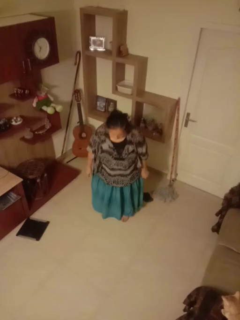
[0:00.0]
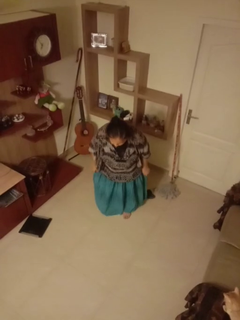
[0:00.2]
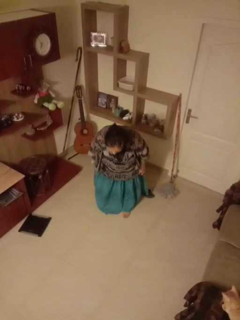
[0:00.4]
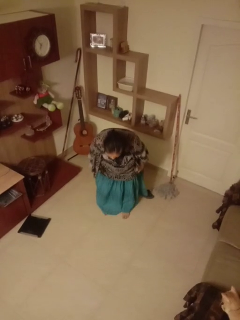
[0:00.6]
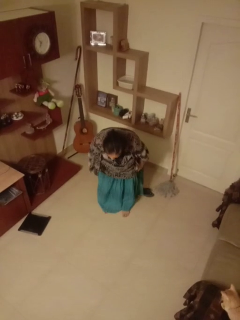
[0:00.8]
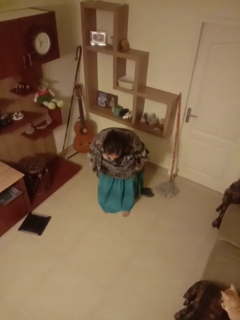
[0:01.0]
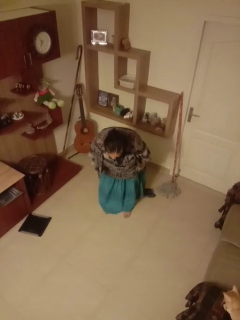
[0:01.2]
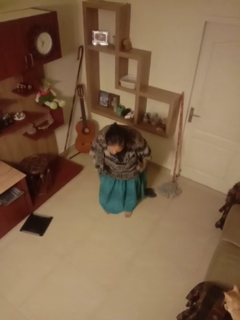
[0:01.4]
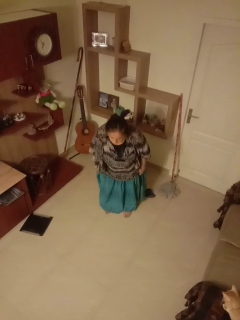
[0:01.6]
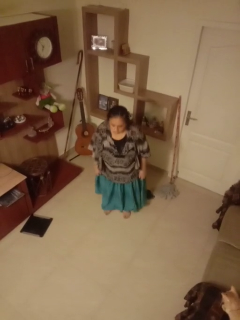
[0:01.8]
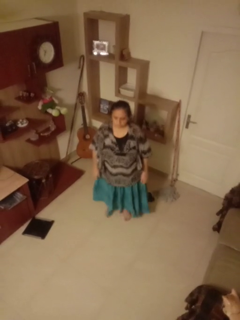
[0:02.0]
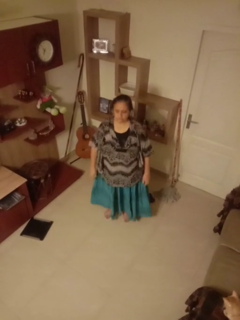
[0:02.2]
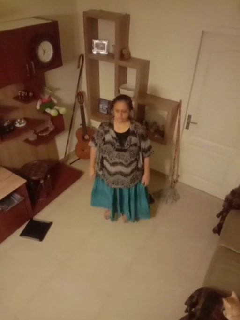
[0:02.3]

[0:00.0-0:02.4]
person bows

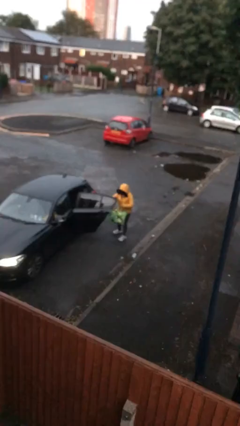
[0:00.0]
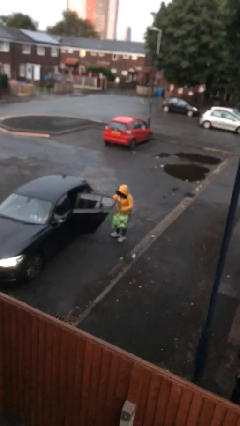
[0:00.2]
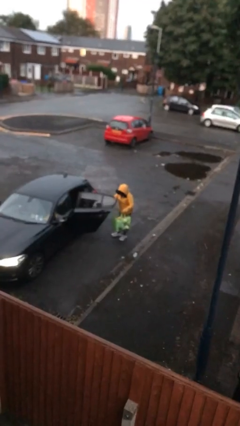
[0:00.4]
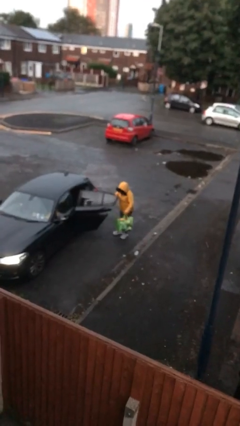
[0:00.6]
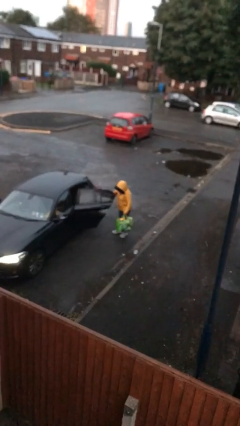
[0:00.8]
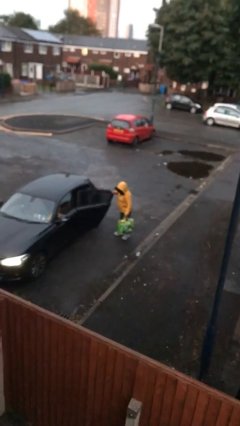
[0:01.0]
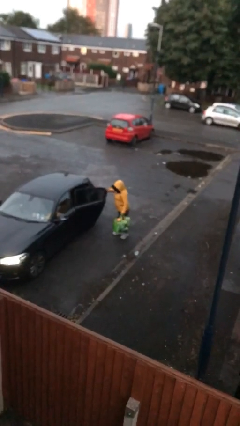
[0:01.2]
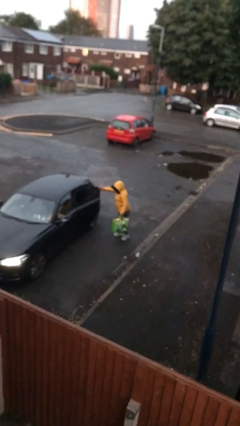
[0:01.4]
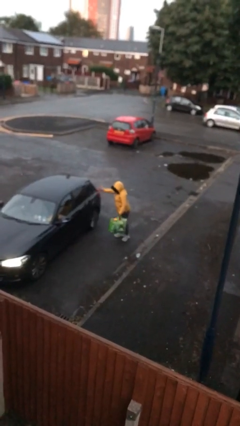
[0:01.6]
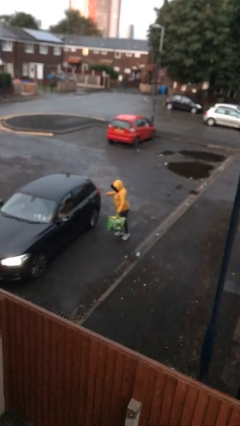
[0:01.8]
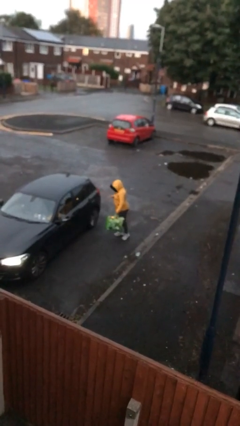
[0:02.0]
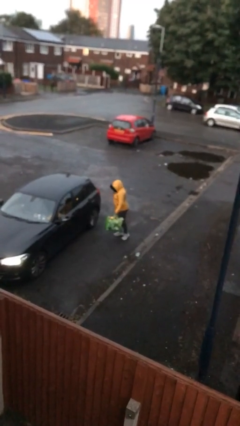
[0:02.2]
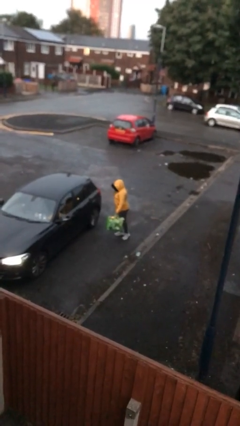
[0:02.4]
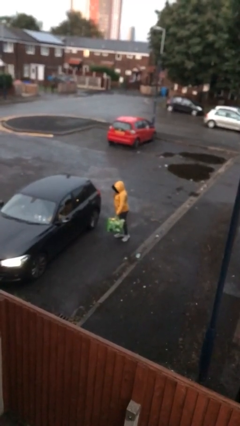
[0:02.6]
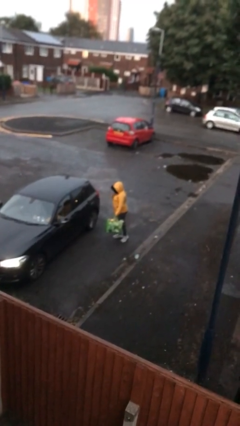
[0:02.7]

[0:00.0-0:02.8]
person closes car door

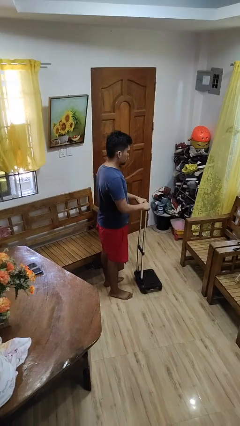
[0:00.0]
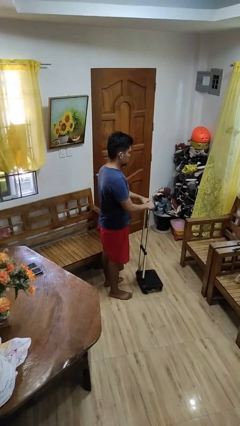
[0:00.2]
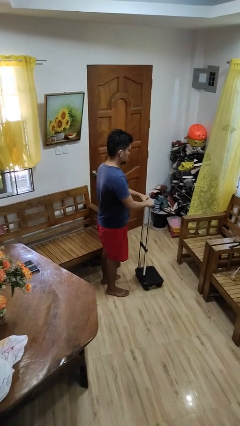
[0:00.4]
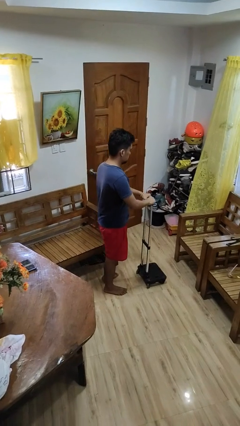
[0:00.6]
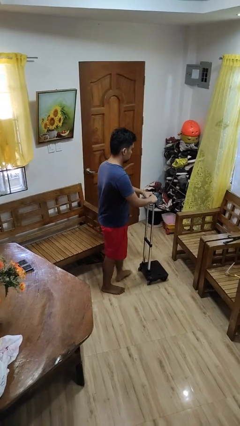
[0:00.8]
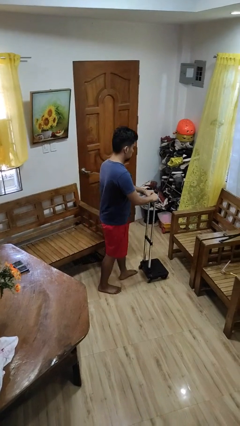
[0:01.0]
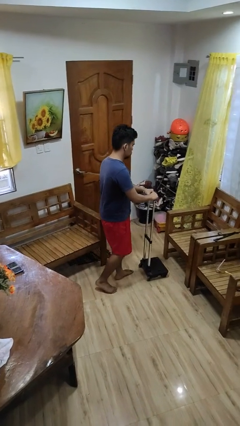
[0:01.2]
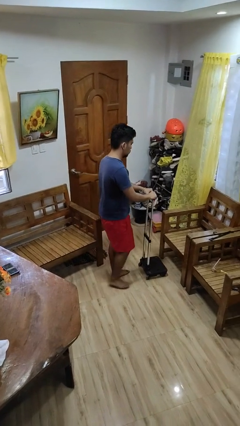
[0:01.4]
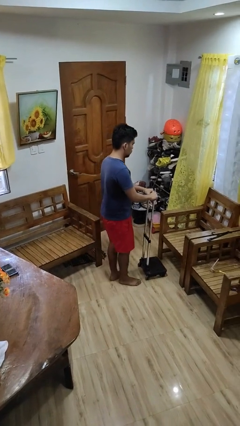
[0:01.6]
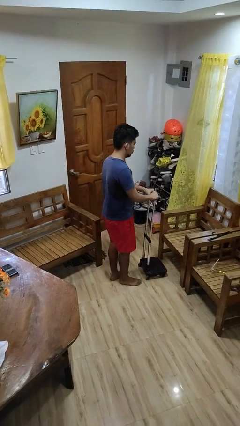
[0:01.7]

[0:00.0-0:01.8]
person pushes wheeled cart

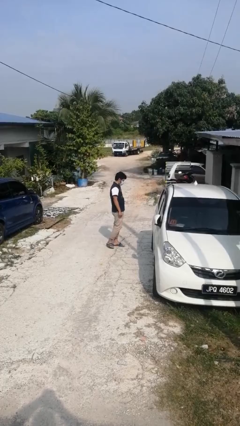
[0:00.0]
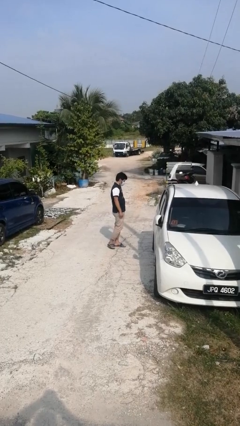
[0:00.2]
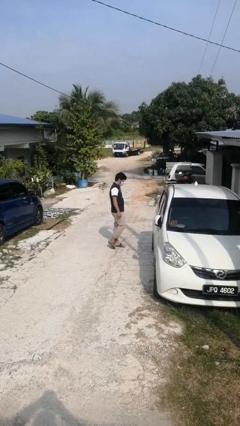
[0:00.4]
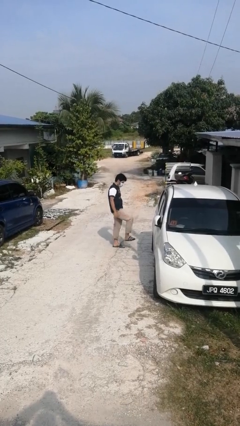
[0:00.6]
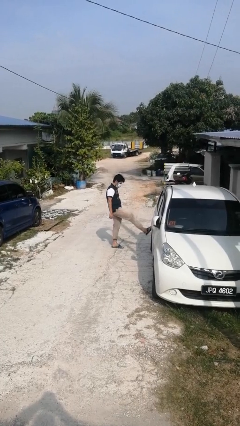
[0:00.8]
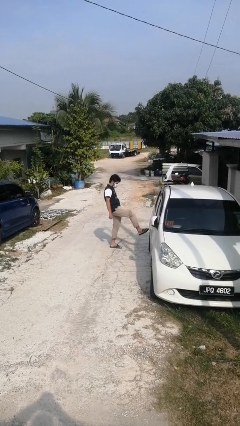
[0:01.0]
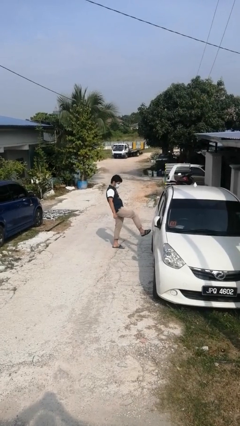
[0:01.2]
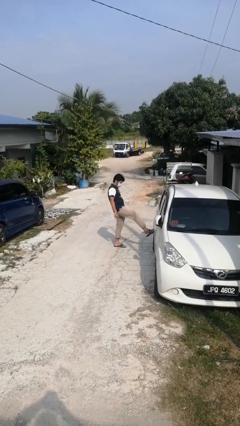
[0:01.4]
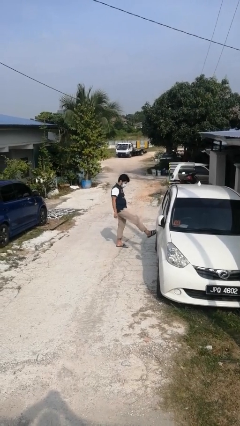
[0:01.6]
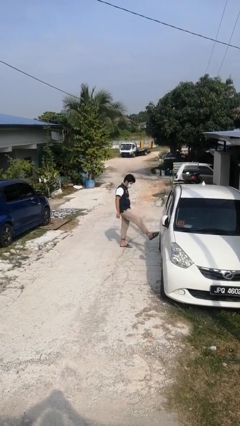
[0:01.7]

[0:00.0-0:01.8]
person kicks car tires

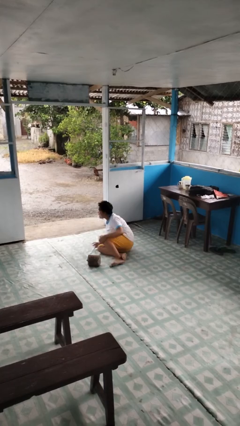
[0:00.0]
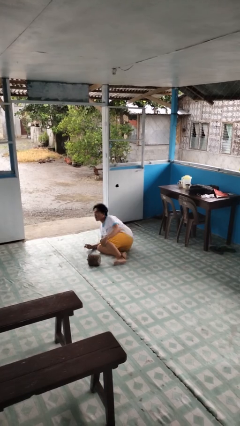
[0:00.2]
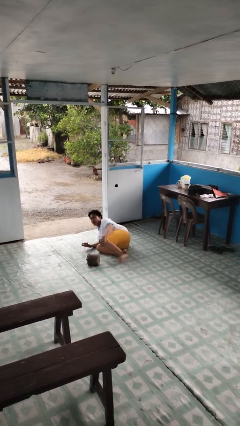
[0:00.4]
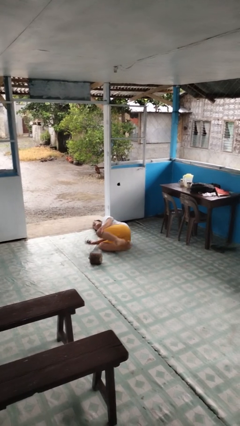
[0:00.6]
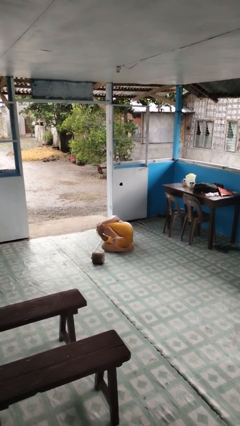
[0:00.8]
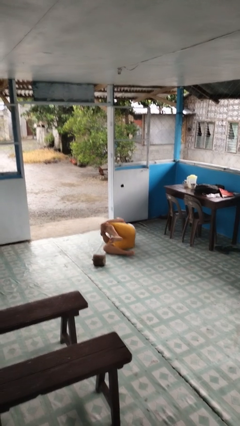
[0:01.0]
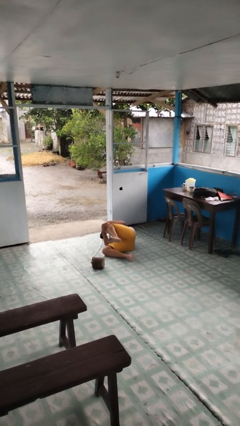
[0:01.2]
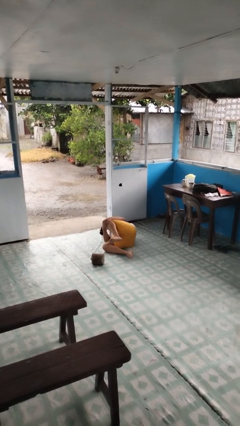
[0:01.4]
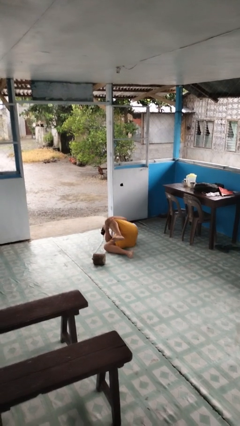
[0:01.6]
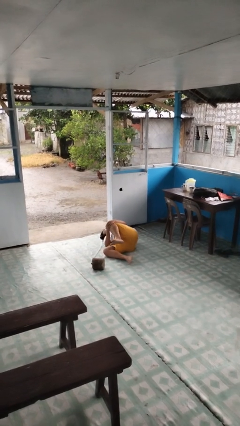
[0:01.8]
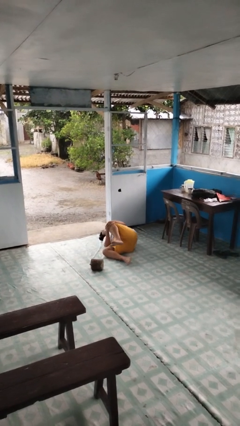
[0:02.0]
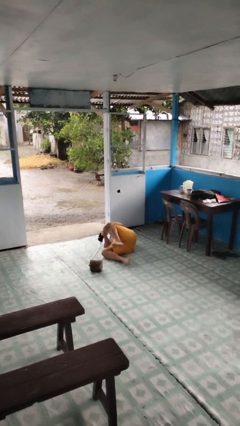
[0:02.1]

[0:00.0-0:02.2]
person lies down on floor

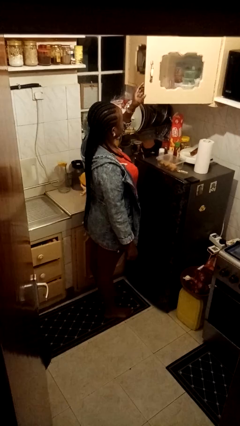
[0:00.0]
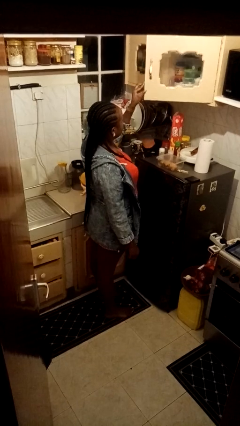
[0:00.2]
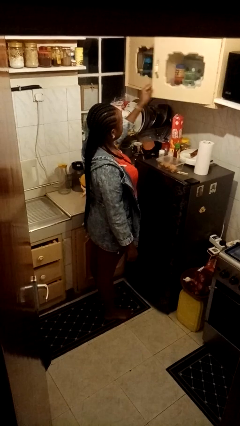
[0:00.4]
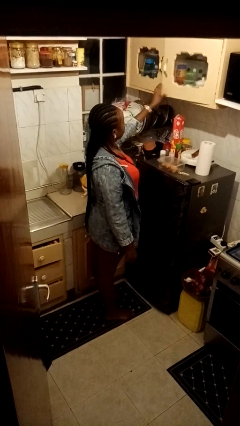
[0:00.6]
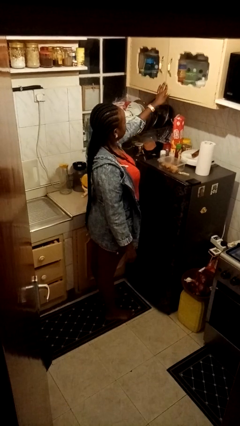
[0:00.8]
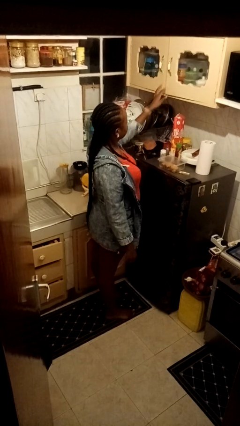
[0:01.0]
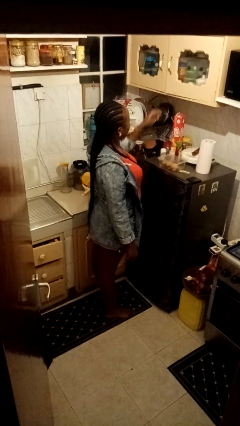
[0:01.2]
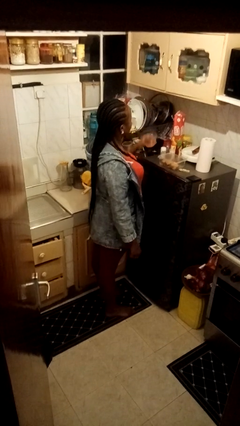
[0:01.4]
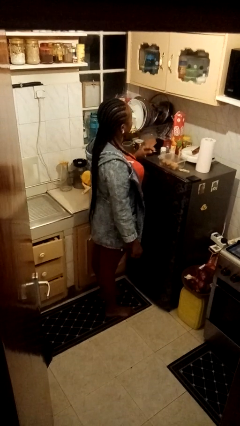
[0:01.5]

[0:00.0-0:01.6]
person closes cabinet

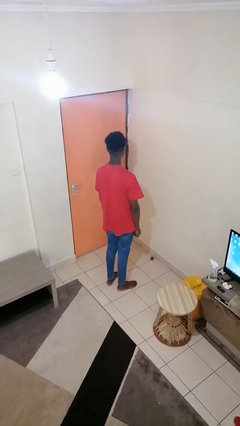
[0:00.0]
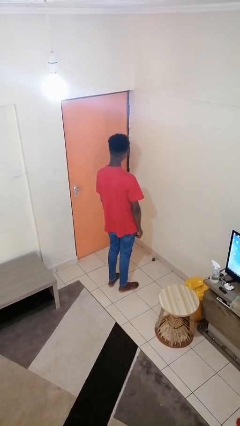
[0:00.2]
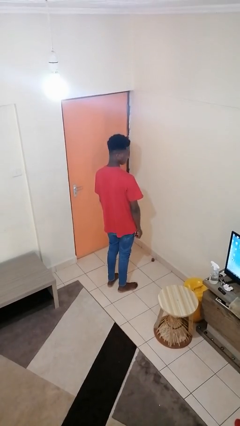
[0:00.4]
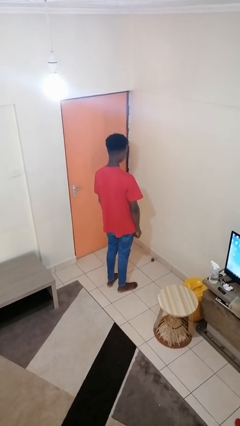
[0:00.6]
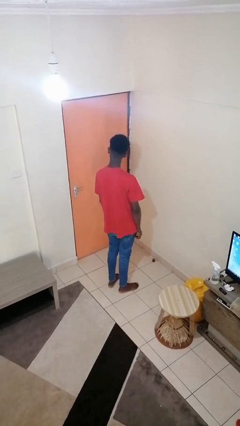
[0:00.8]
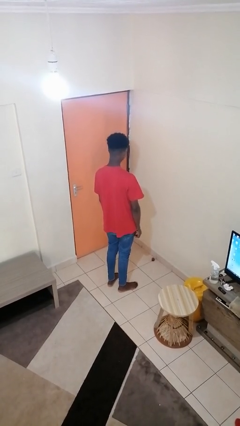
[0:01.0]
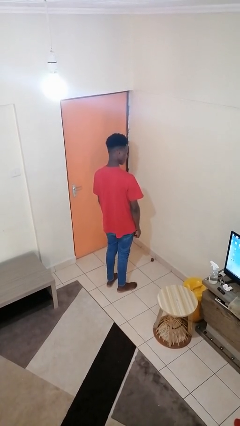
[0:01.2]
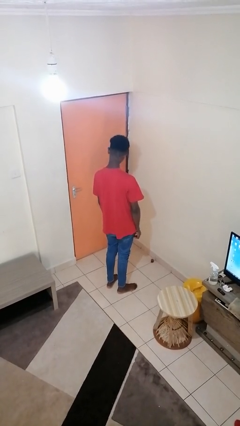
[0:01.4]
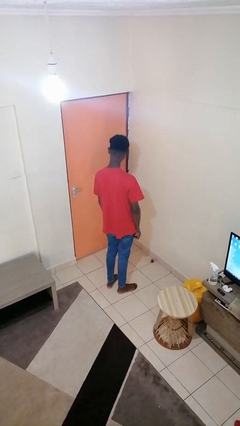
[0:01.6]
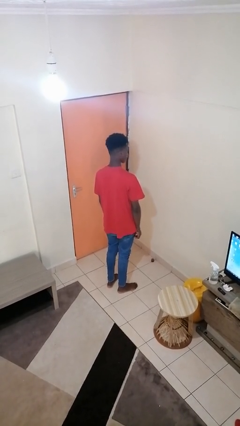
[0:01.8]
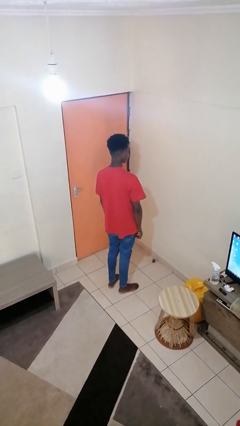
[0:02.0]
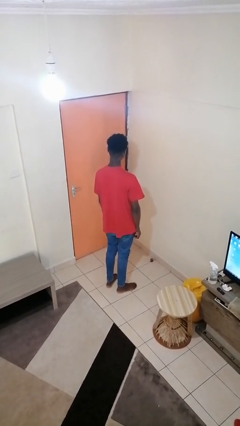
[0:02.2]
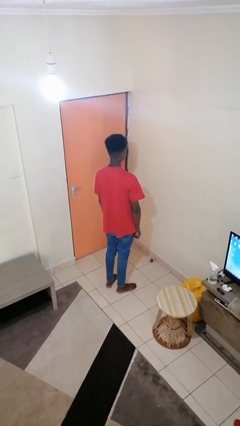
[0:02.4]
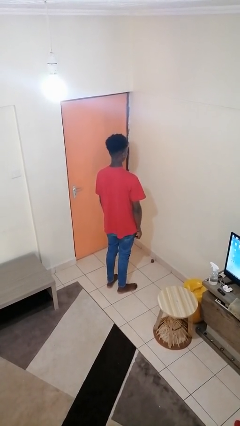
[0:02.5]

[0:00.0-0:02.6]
person shakes head

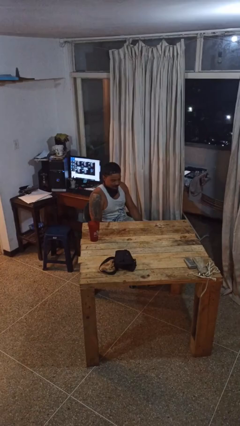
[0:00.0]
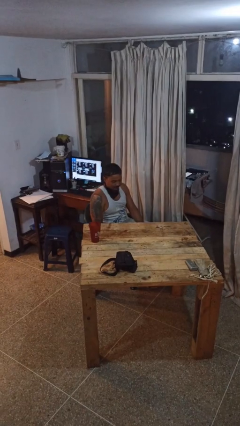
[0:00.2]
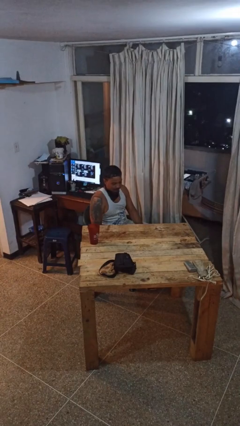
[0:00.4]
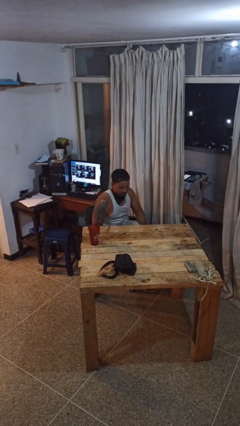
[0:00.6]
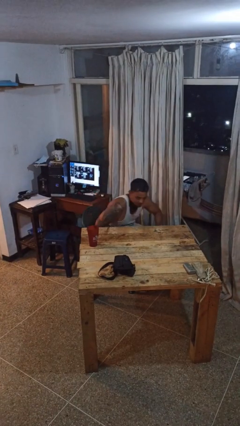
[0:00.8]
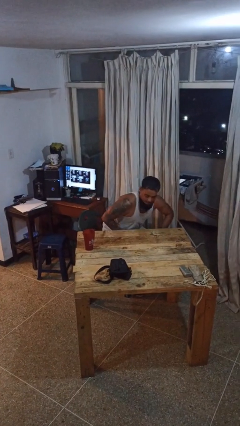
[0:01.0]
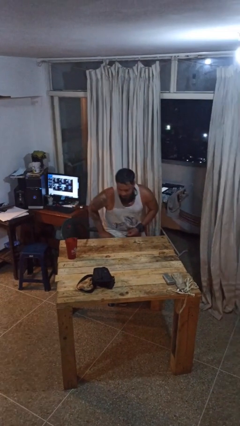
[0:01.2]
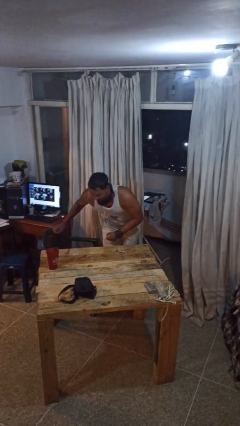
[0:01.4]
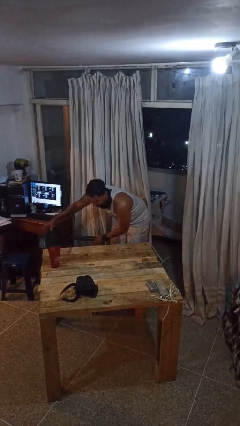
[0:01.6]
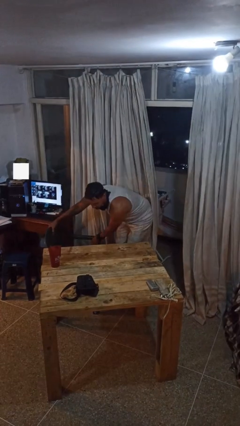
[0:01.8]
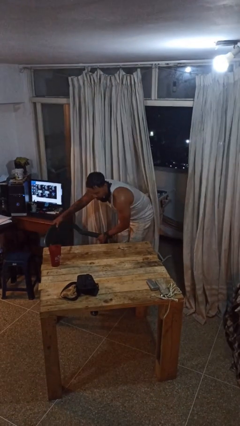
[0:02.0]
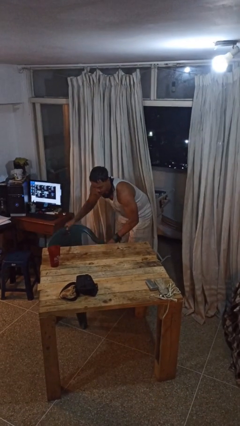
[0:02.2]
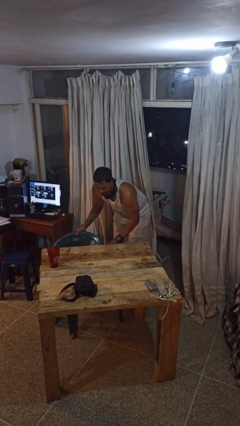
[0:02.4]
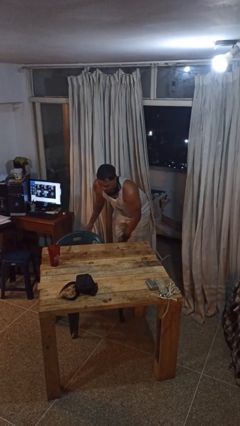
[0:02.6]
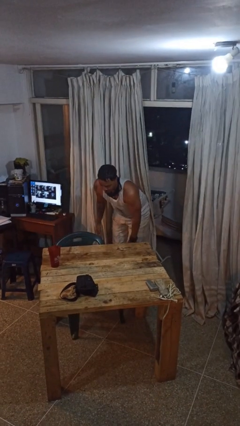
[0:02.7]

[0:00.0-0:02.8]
person stands up
